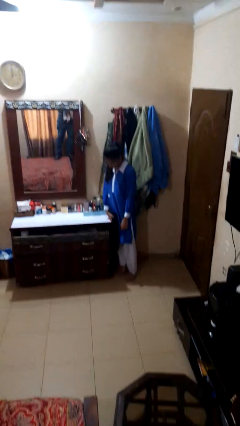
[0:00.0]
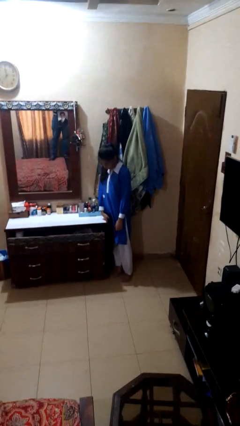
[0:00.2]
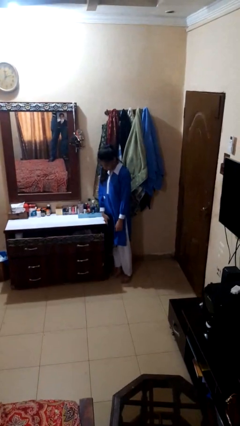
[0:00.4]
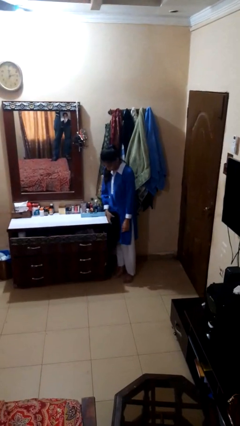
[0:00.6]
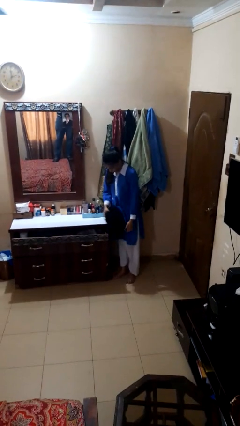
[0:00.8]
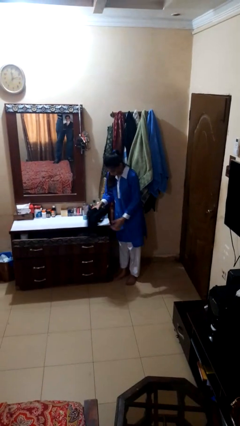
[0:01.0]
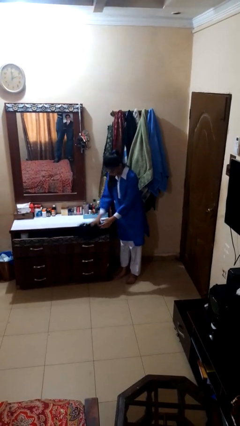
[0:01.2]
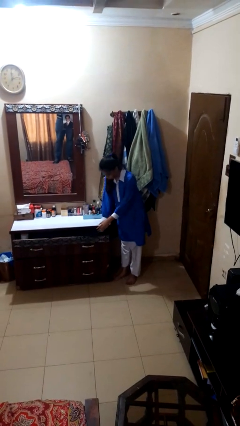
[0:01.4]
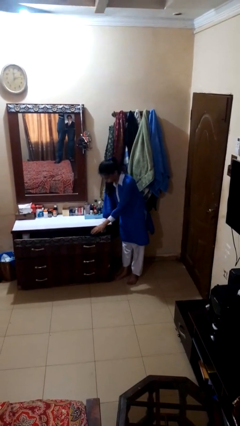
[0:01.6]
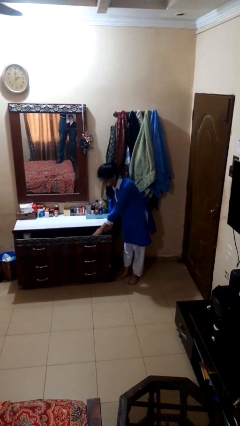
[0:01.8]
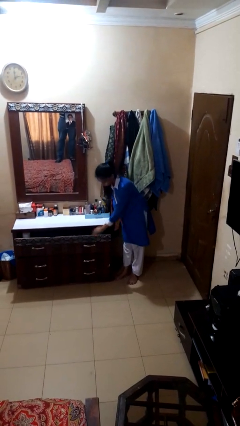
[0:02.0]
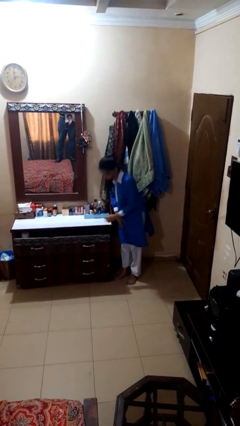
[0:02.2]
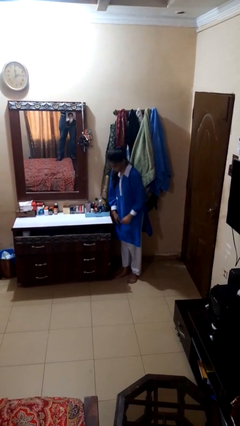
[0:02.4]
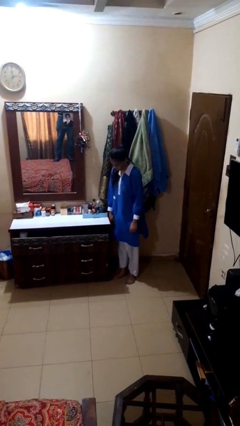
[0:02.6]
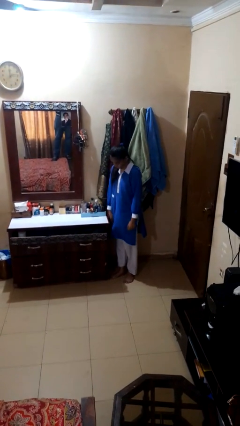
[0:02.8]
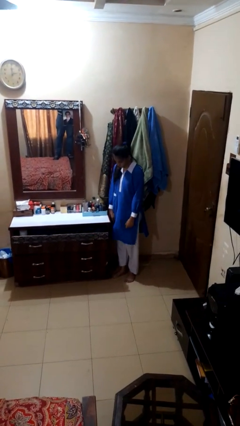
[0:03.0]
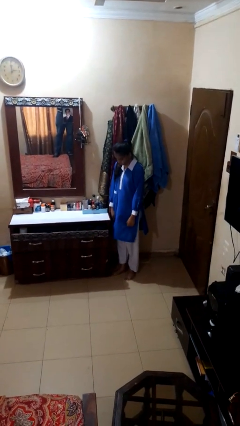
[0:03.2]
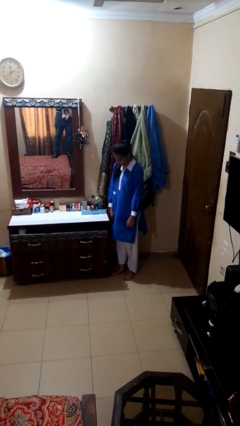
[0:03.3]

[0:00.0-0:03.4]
person puts clothes into dresser

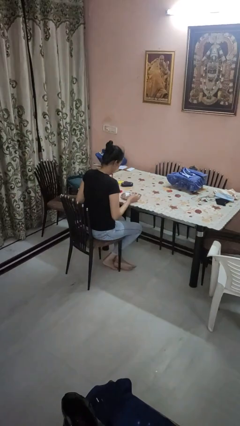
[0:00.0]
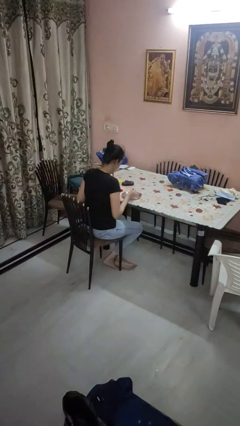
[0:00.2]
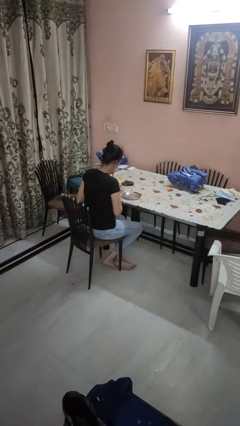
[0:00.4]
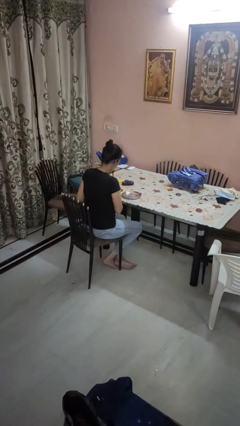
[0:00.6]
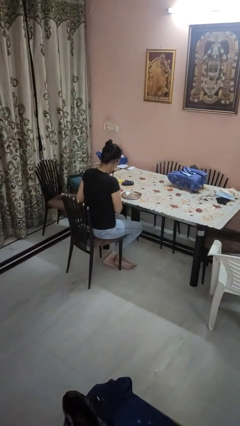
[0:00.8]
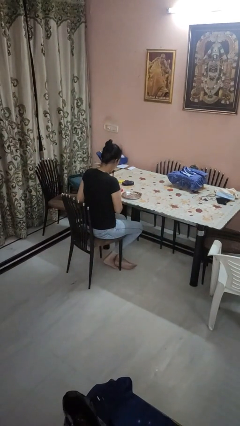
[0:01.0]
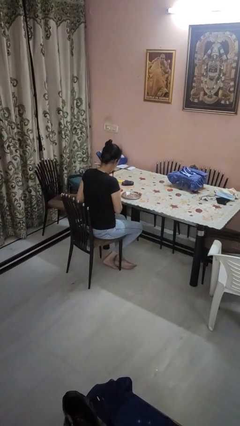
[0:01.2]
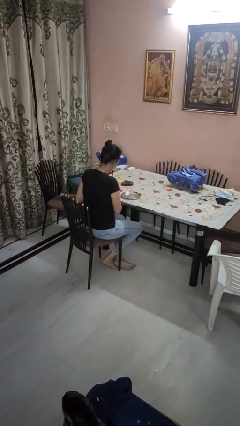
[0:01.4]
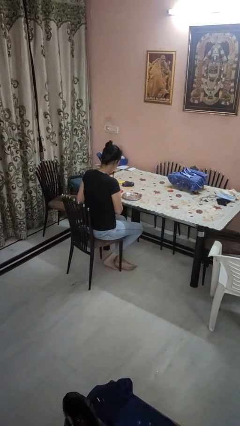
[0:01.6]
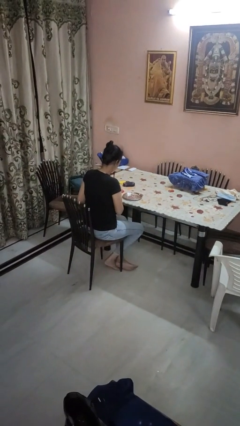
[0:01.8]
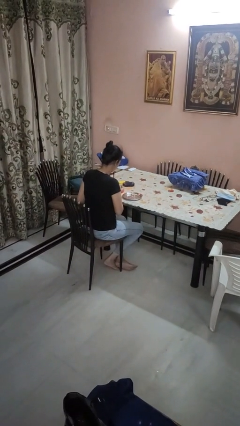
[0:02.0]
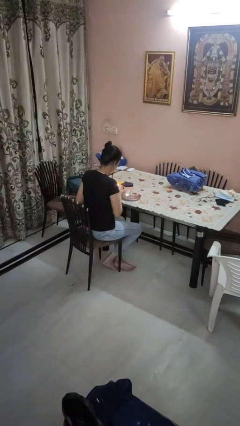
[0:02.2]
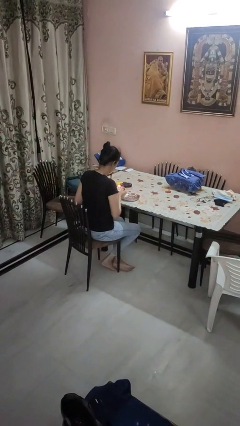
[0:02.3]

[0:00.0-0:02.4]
person lights candle

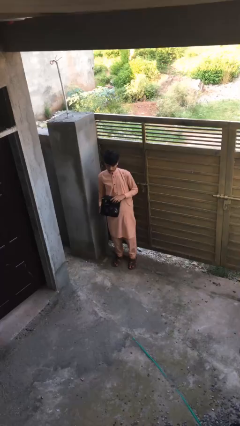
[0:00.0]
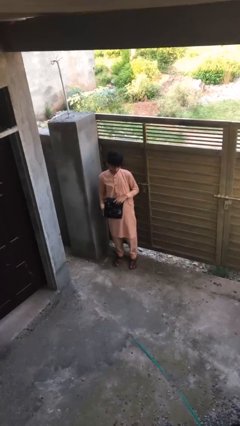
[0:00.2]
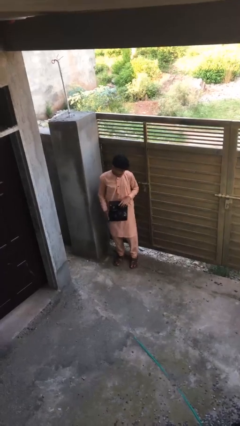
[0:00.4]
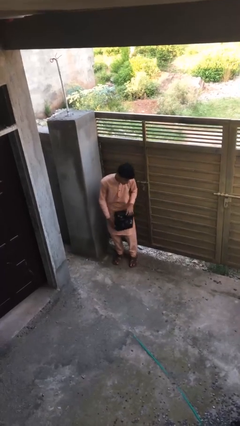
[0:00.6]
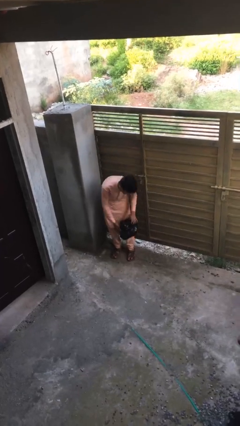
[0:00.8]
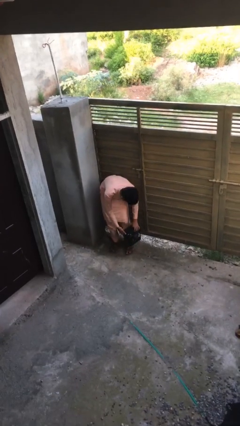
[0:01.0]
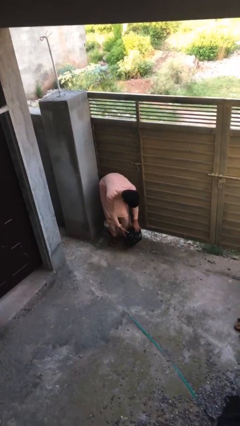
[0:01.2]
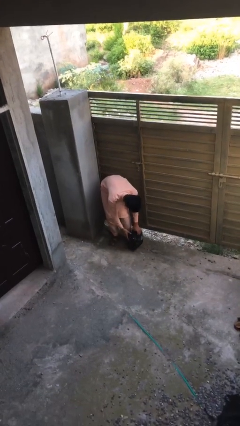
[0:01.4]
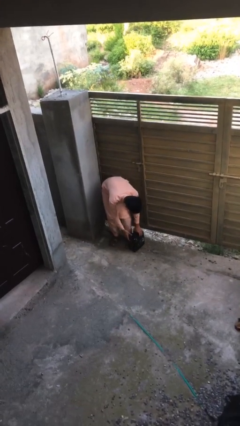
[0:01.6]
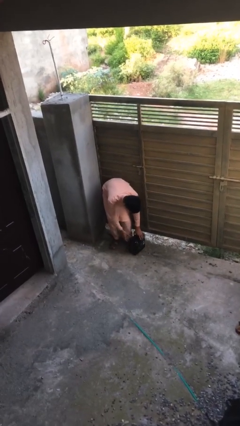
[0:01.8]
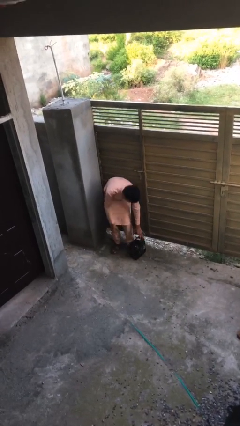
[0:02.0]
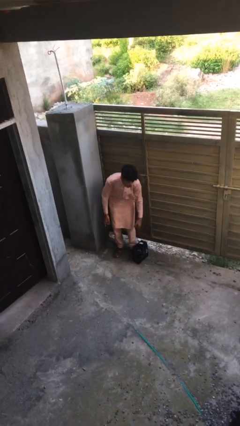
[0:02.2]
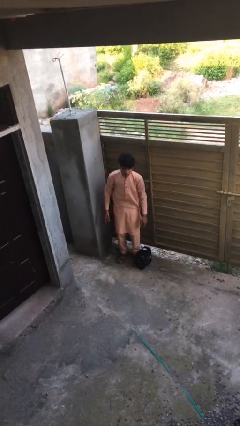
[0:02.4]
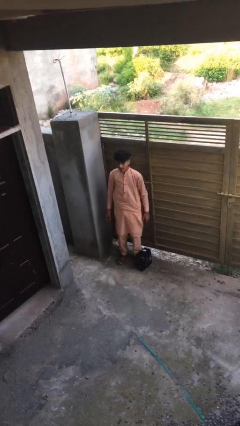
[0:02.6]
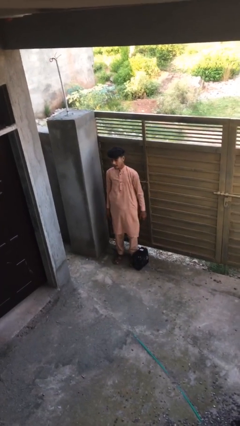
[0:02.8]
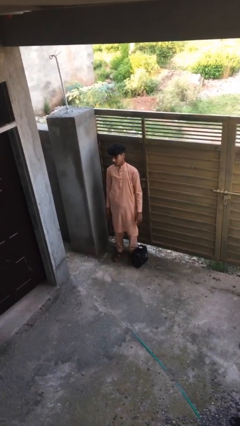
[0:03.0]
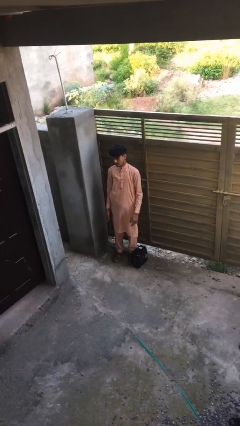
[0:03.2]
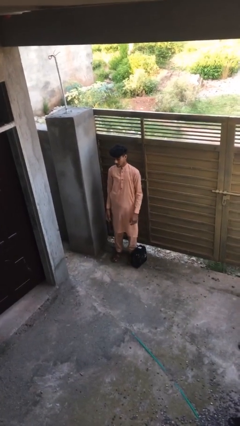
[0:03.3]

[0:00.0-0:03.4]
person puts down object on floor

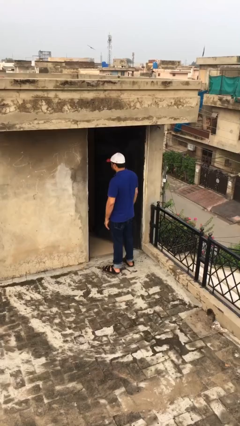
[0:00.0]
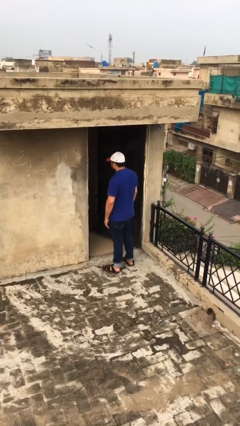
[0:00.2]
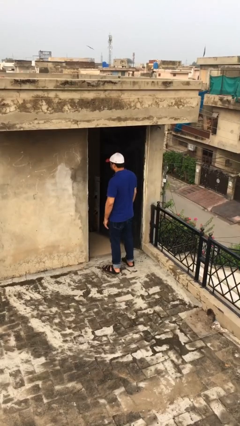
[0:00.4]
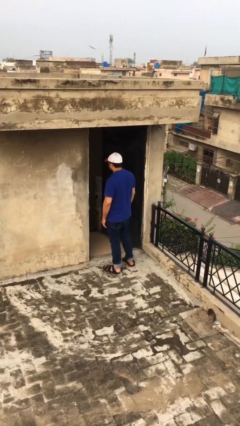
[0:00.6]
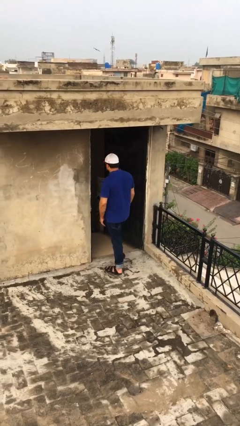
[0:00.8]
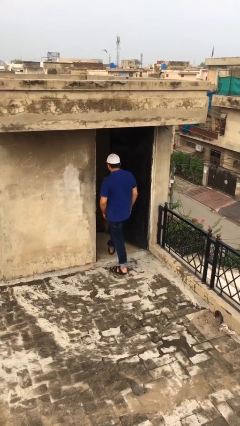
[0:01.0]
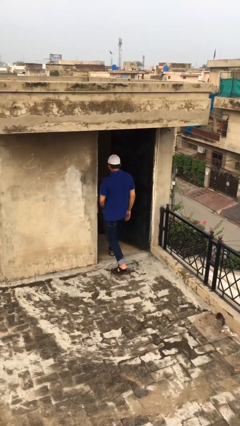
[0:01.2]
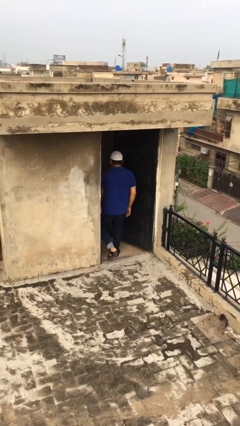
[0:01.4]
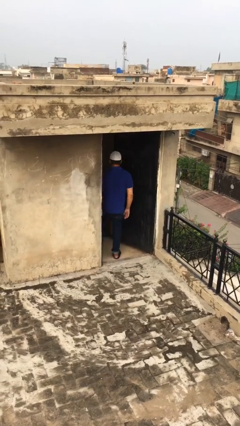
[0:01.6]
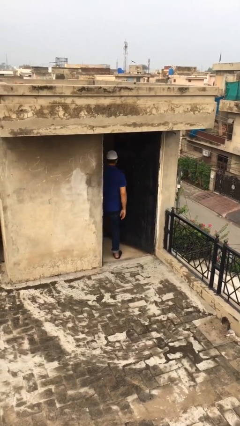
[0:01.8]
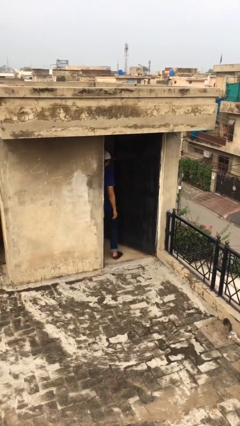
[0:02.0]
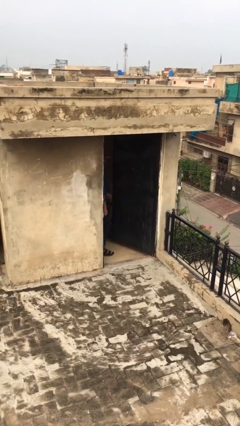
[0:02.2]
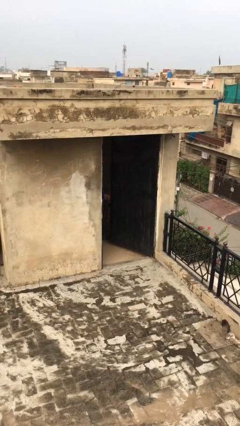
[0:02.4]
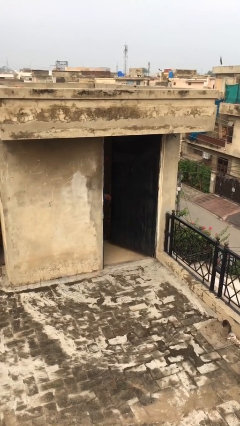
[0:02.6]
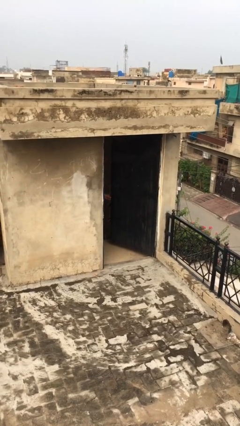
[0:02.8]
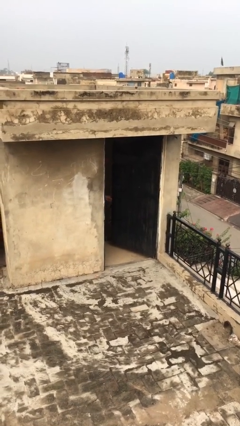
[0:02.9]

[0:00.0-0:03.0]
person exits scene through structure

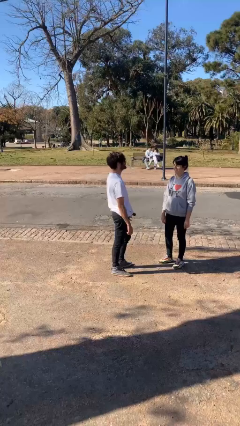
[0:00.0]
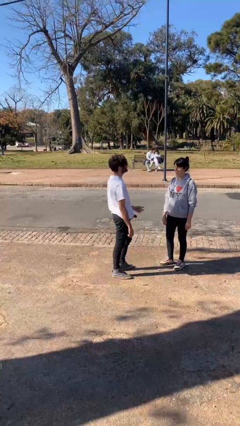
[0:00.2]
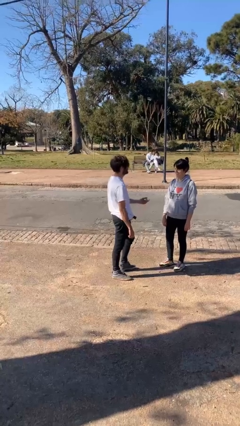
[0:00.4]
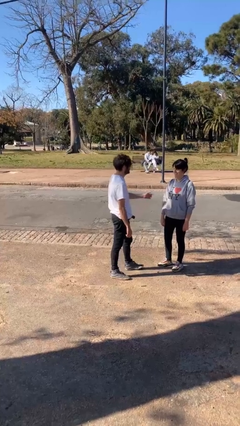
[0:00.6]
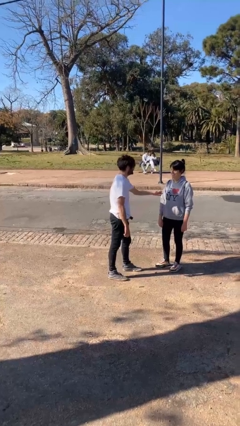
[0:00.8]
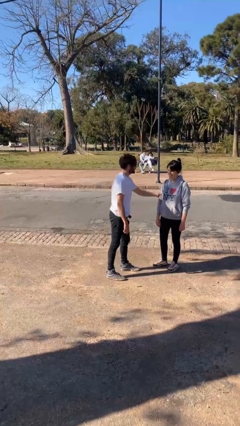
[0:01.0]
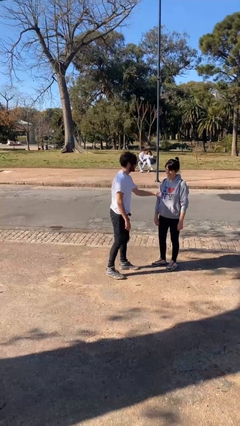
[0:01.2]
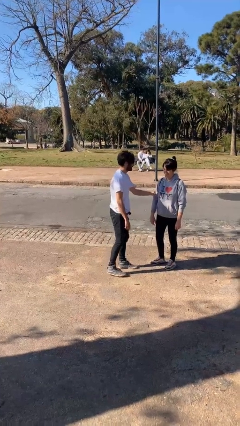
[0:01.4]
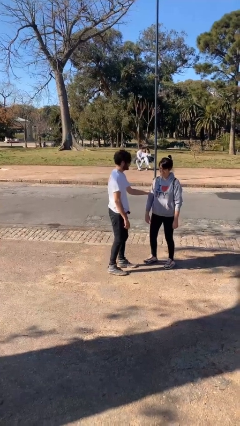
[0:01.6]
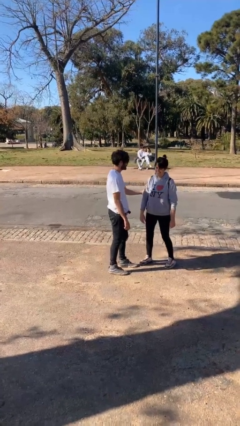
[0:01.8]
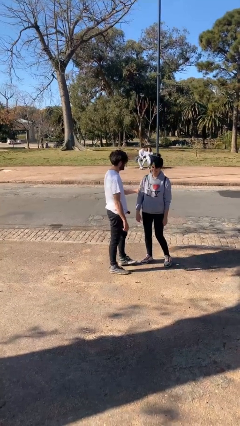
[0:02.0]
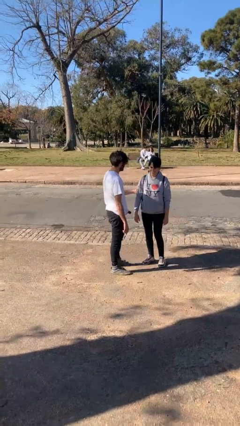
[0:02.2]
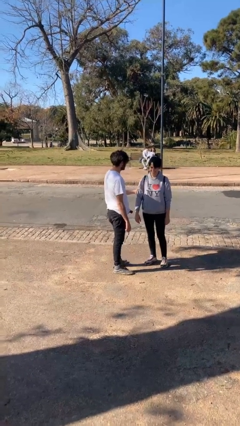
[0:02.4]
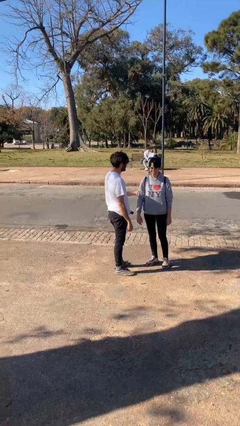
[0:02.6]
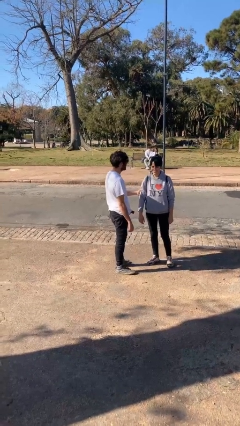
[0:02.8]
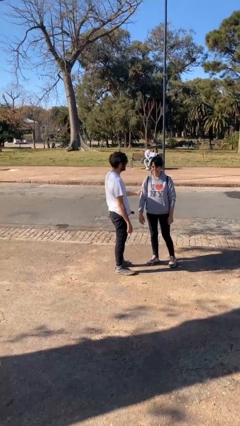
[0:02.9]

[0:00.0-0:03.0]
person grabs person by bicep

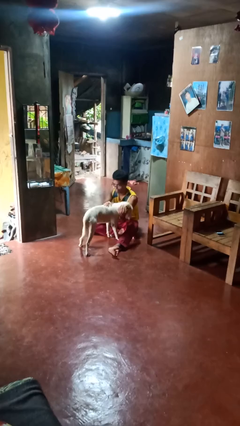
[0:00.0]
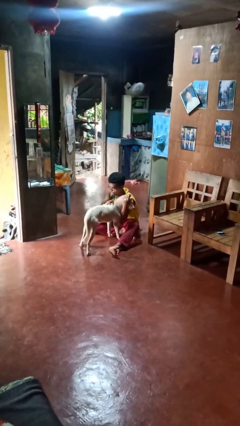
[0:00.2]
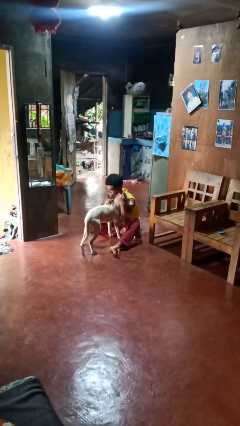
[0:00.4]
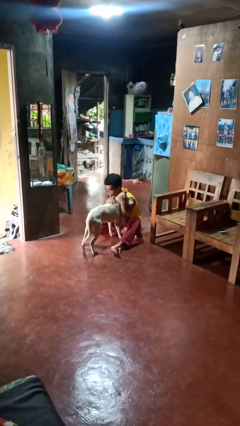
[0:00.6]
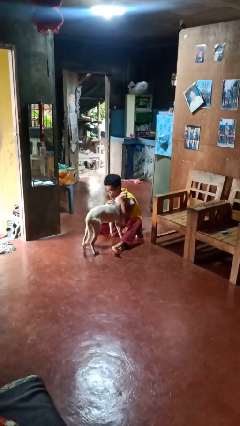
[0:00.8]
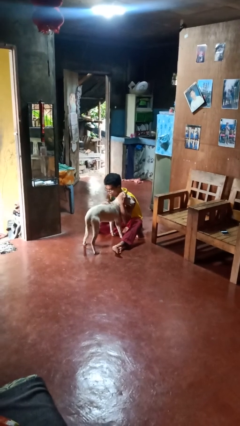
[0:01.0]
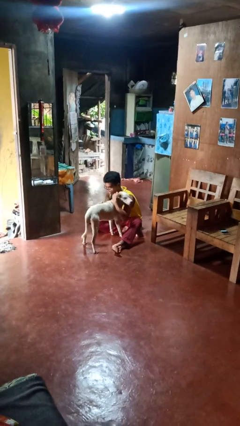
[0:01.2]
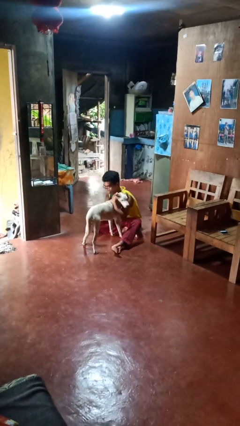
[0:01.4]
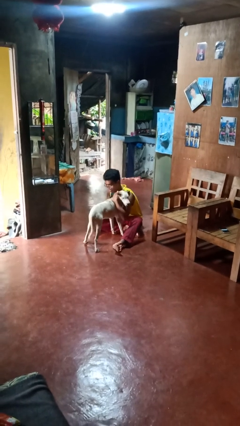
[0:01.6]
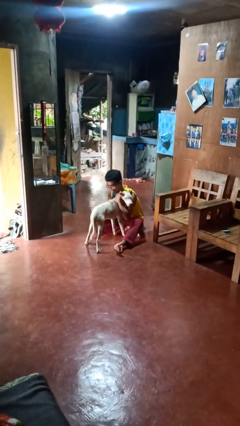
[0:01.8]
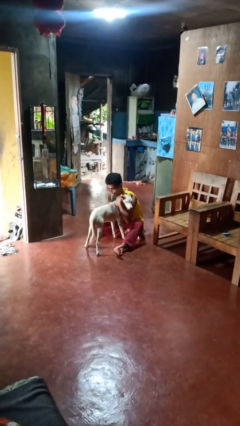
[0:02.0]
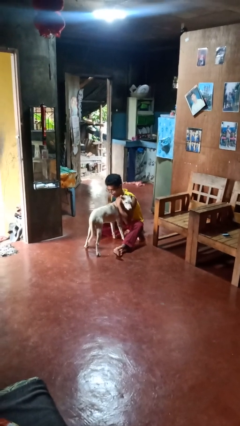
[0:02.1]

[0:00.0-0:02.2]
person hugs dog
